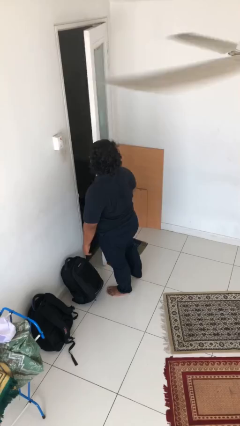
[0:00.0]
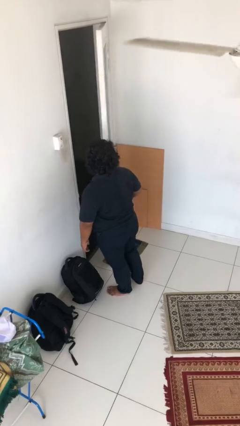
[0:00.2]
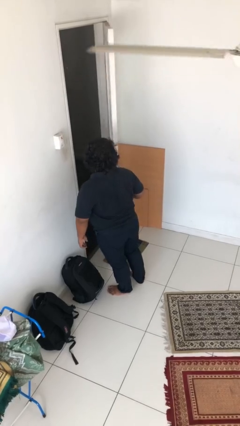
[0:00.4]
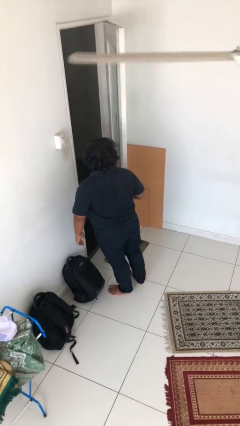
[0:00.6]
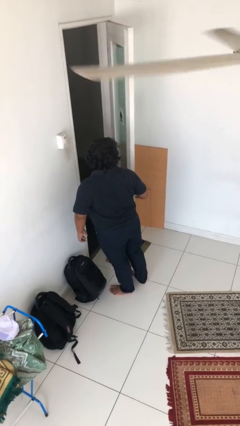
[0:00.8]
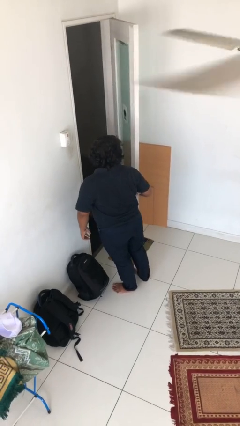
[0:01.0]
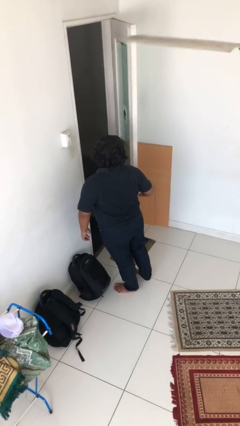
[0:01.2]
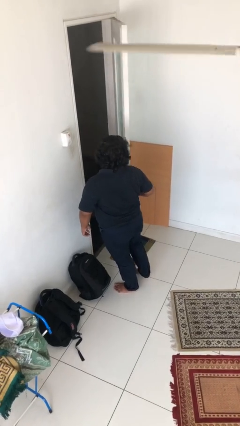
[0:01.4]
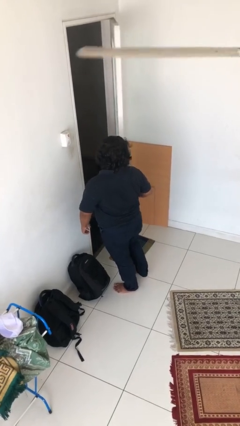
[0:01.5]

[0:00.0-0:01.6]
person opens facility door

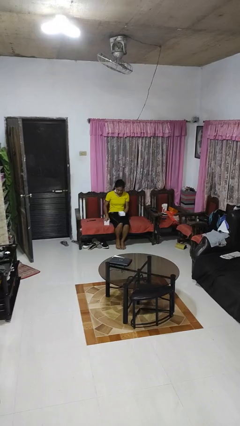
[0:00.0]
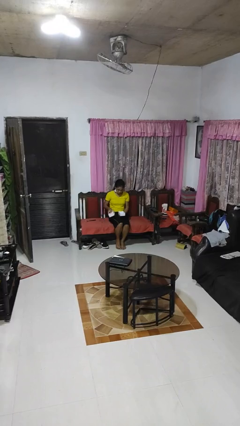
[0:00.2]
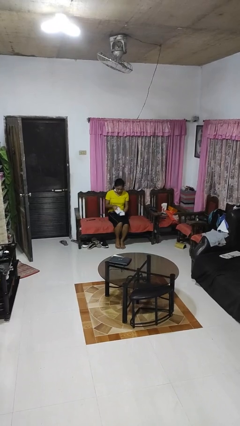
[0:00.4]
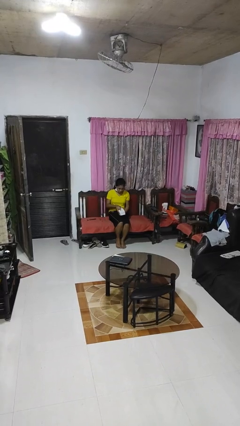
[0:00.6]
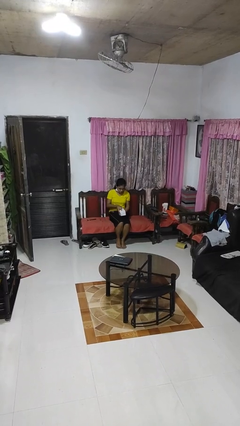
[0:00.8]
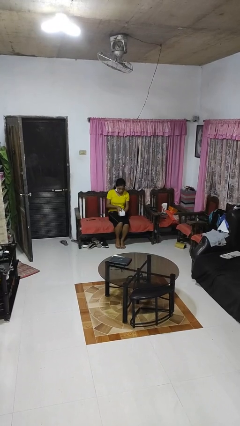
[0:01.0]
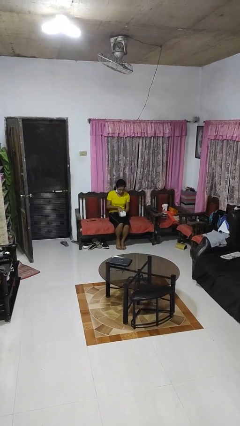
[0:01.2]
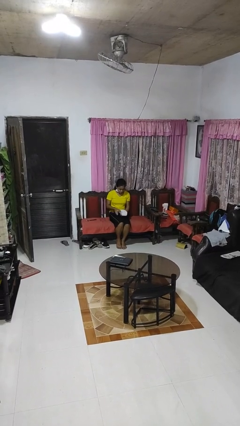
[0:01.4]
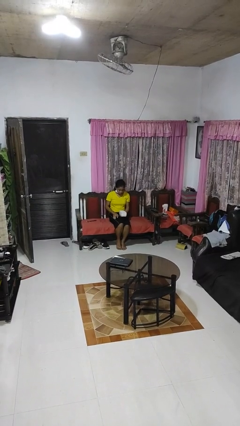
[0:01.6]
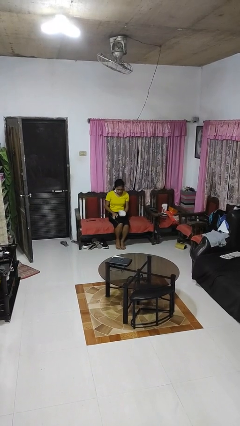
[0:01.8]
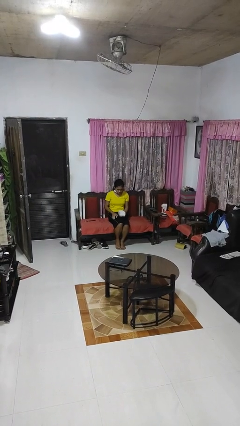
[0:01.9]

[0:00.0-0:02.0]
person closes jewelry box

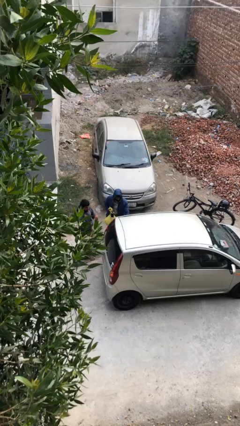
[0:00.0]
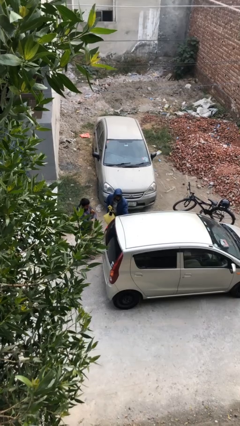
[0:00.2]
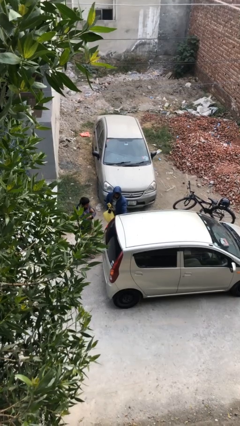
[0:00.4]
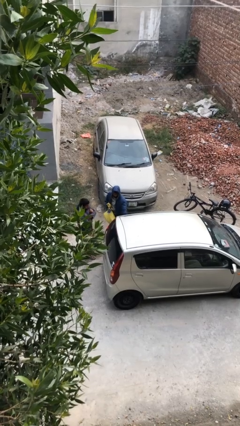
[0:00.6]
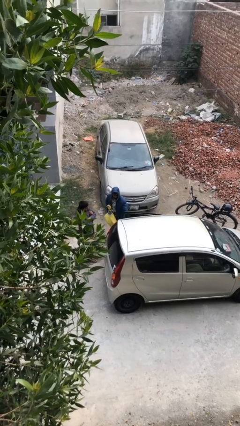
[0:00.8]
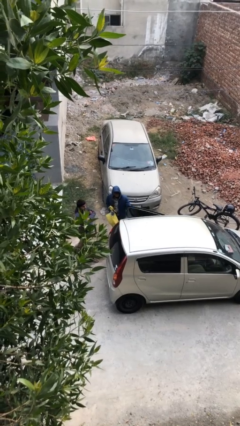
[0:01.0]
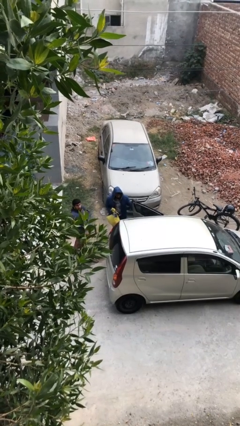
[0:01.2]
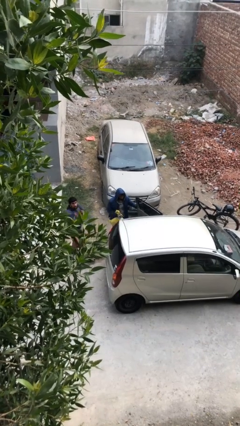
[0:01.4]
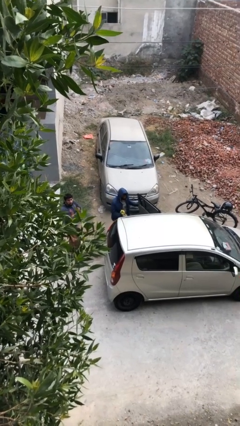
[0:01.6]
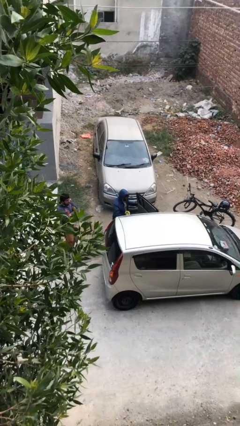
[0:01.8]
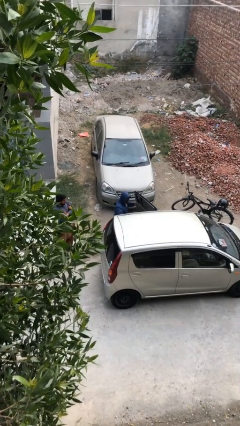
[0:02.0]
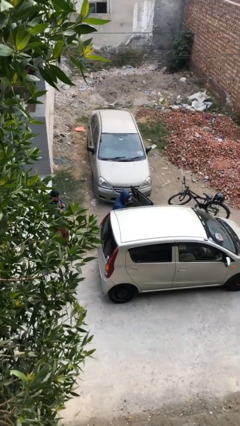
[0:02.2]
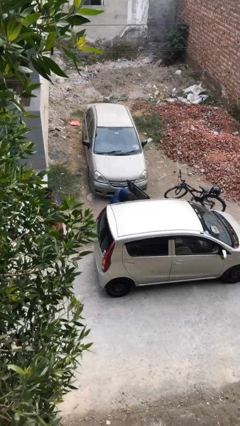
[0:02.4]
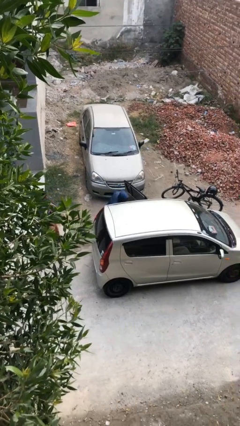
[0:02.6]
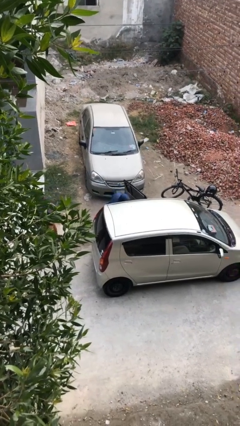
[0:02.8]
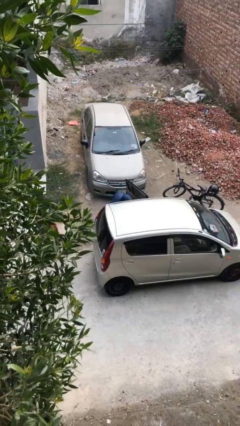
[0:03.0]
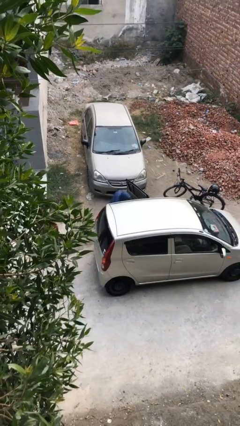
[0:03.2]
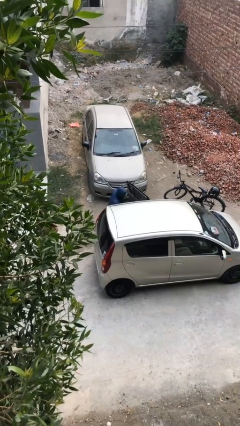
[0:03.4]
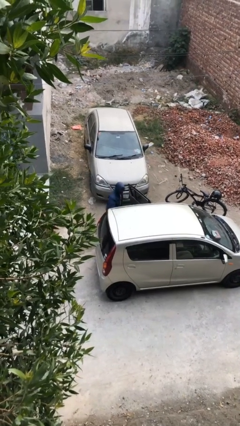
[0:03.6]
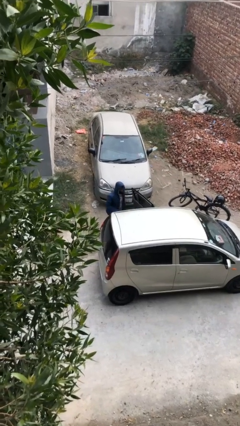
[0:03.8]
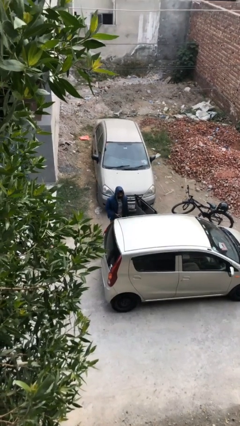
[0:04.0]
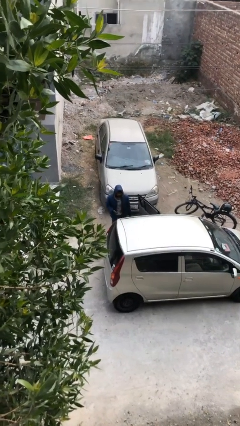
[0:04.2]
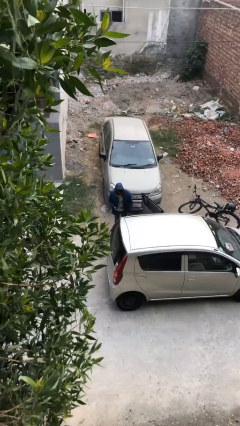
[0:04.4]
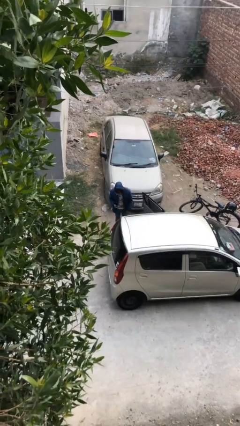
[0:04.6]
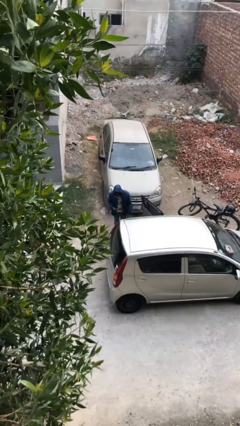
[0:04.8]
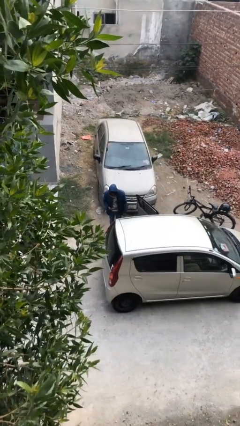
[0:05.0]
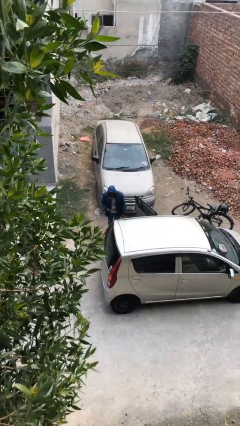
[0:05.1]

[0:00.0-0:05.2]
person loads car

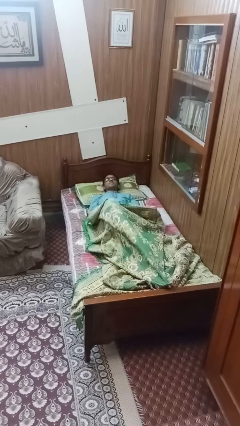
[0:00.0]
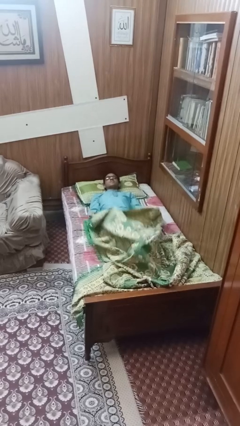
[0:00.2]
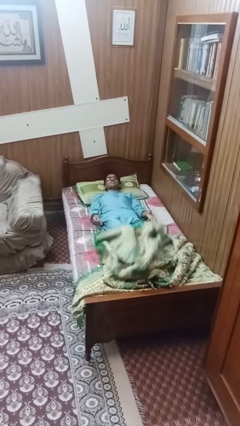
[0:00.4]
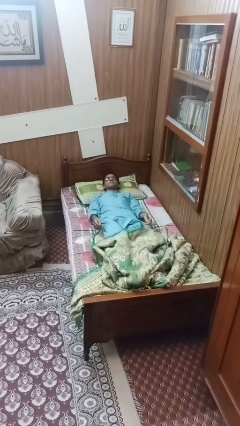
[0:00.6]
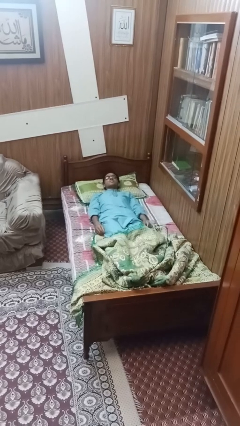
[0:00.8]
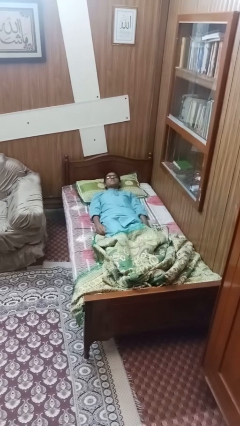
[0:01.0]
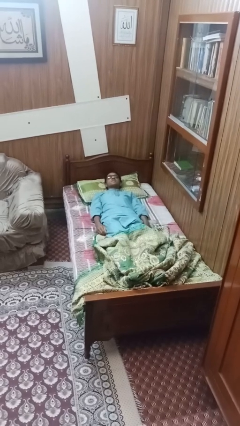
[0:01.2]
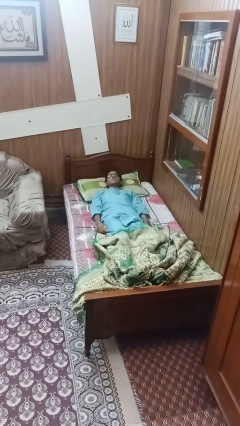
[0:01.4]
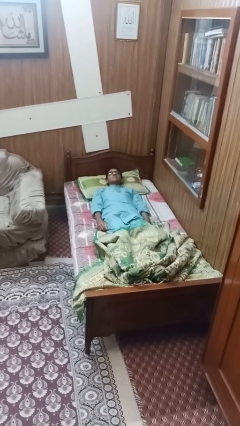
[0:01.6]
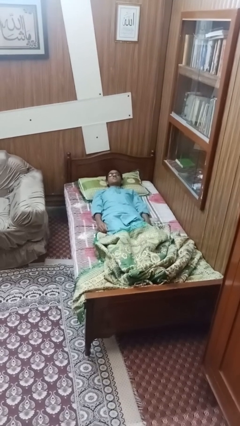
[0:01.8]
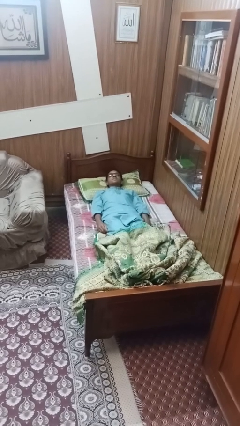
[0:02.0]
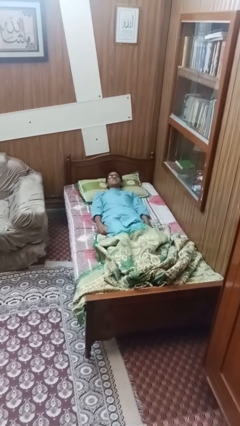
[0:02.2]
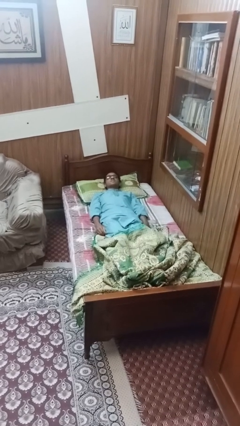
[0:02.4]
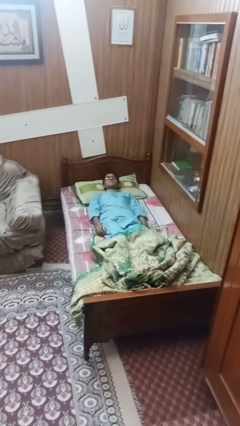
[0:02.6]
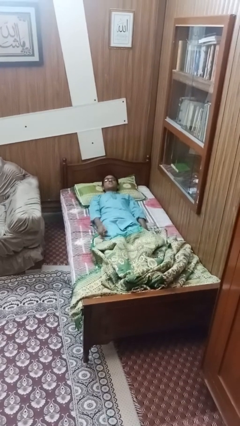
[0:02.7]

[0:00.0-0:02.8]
person uncovers with bedsheets

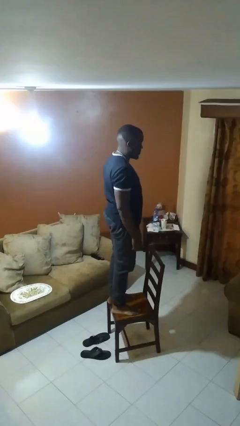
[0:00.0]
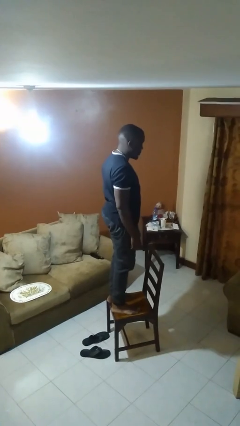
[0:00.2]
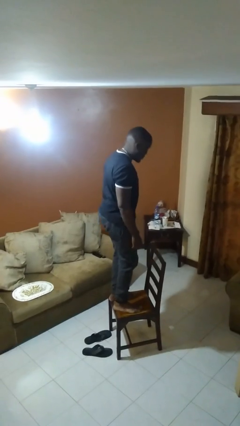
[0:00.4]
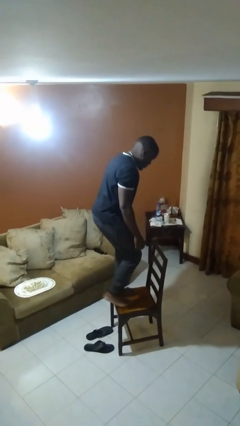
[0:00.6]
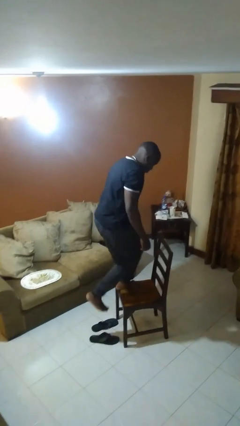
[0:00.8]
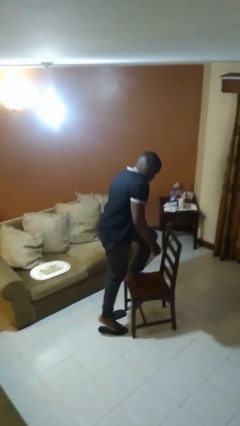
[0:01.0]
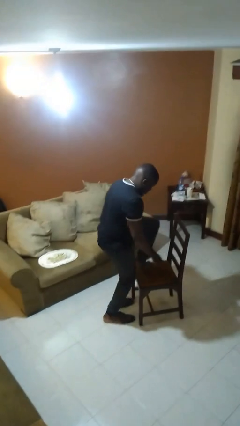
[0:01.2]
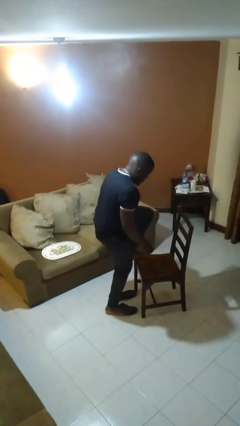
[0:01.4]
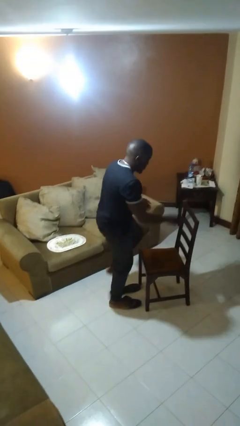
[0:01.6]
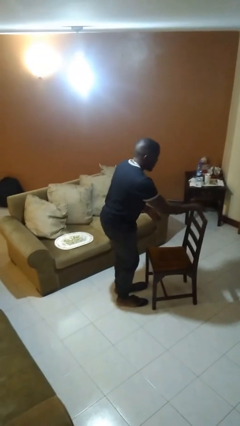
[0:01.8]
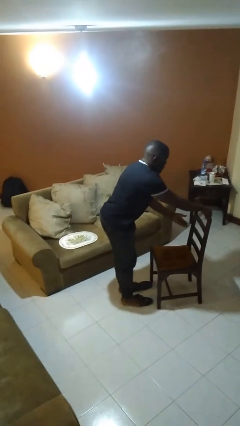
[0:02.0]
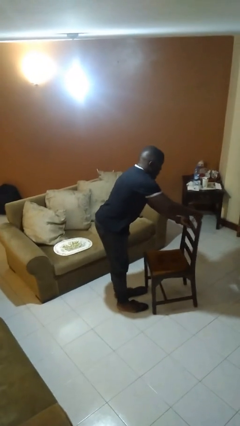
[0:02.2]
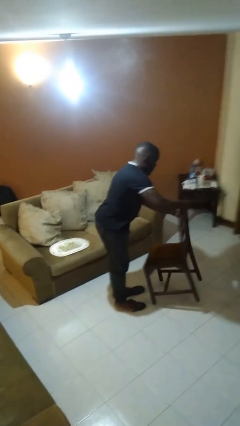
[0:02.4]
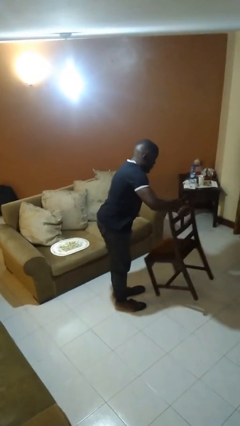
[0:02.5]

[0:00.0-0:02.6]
person climbs off chair

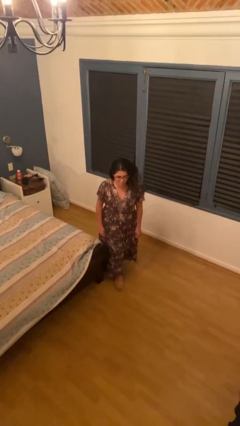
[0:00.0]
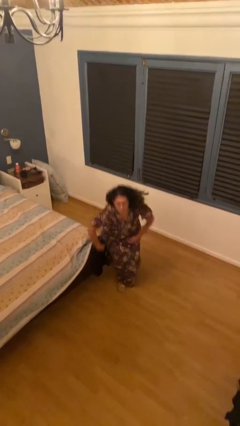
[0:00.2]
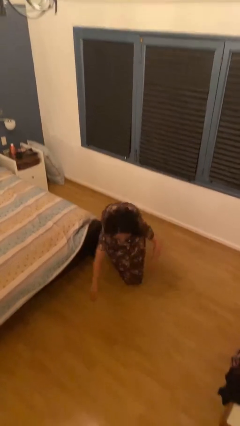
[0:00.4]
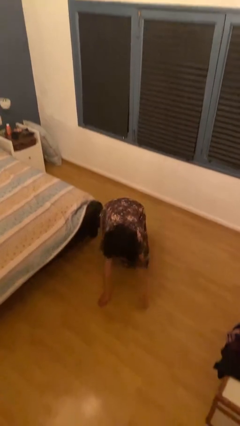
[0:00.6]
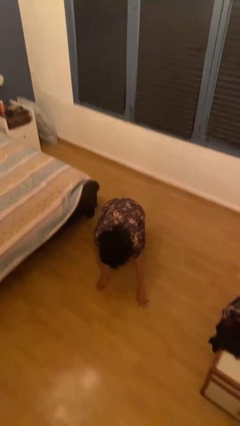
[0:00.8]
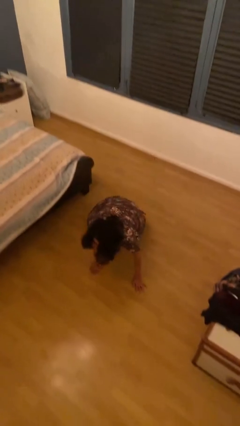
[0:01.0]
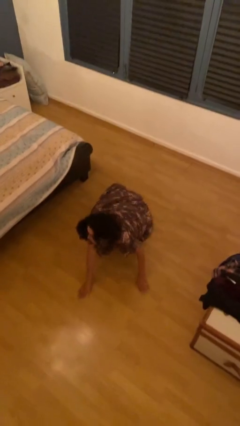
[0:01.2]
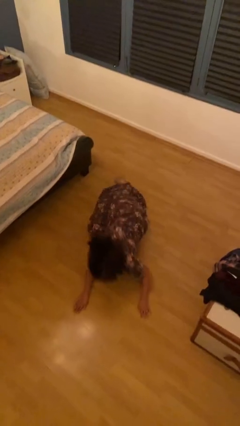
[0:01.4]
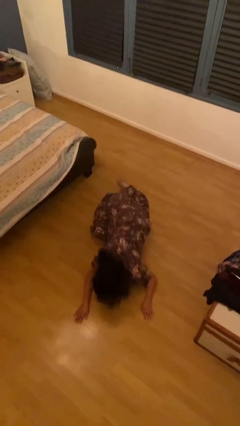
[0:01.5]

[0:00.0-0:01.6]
person trips on object on floor

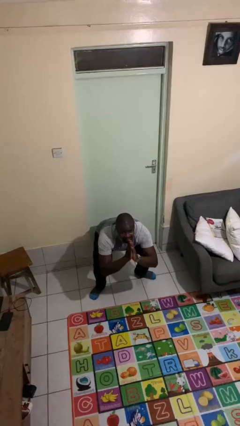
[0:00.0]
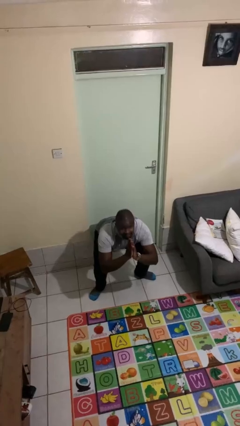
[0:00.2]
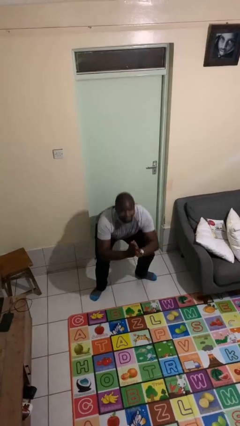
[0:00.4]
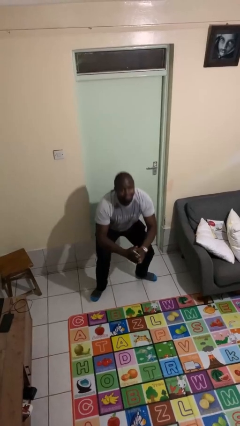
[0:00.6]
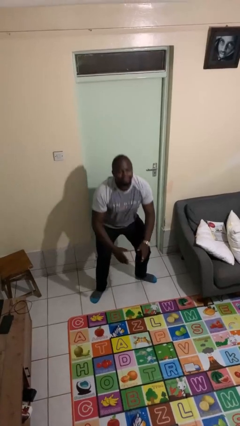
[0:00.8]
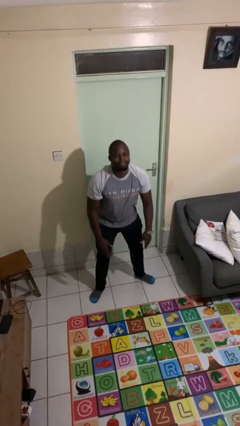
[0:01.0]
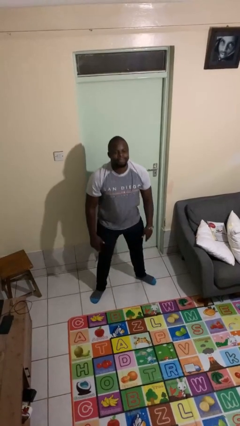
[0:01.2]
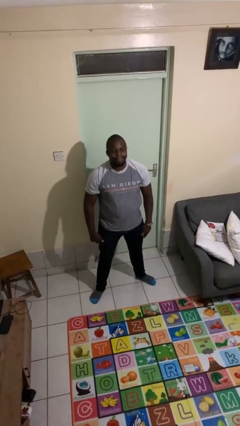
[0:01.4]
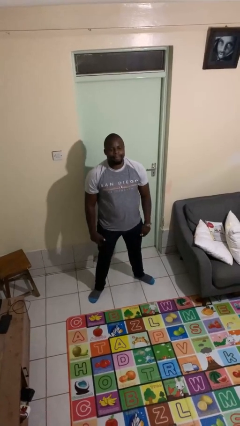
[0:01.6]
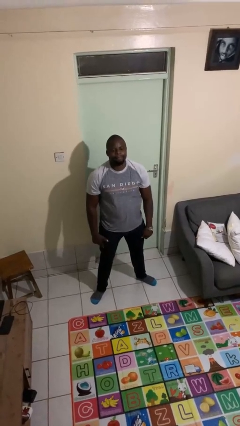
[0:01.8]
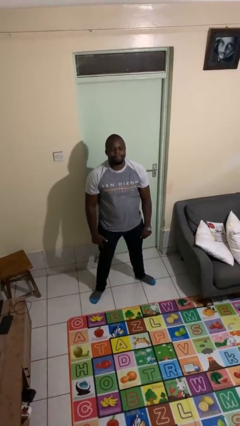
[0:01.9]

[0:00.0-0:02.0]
person stands up
